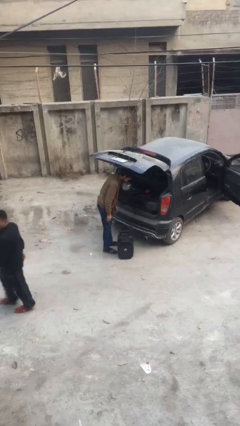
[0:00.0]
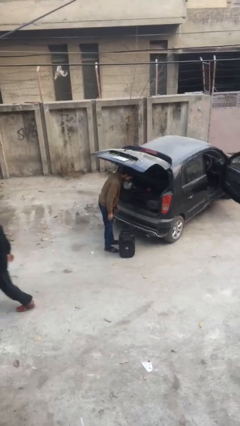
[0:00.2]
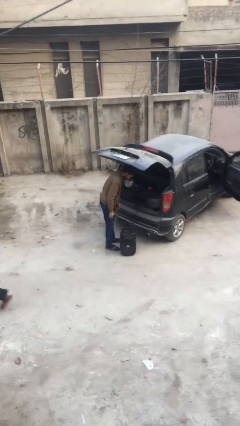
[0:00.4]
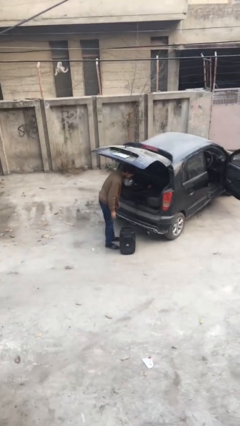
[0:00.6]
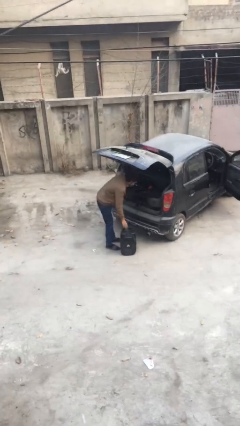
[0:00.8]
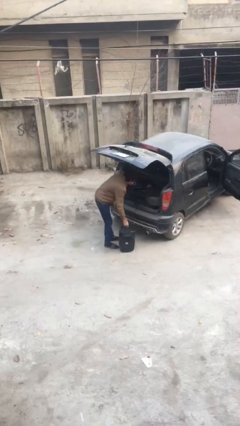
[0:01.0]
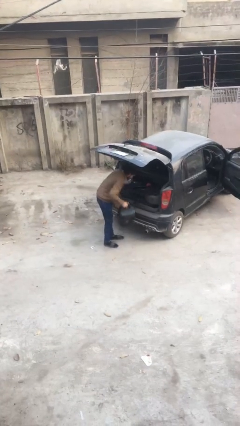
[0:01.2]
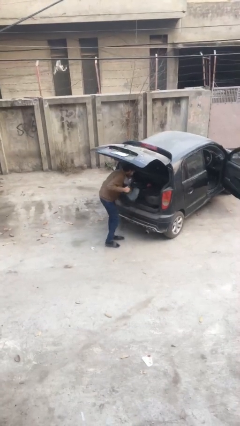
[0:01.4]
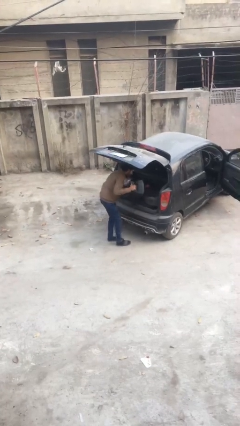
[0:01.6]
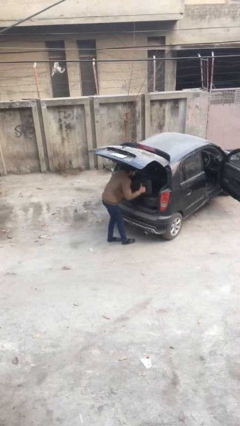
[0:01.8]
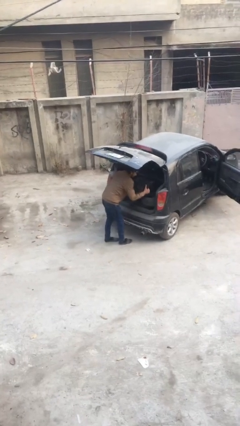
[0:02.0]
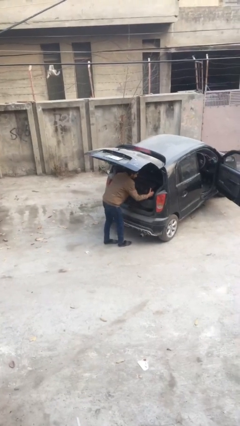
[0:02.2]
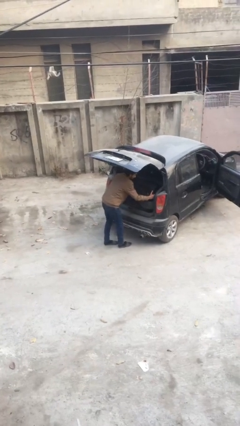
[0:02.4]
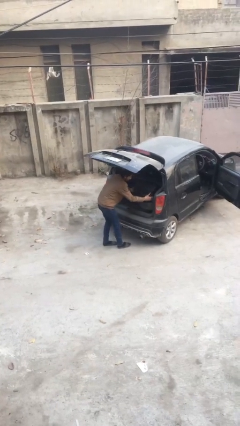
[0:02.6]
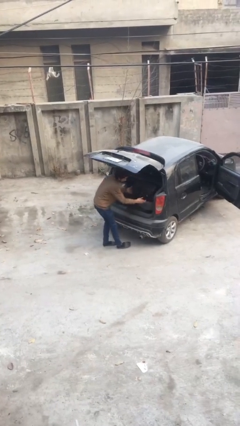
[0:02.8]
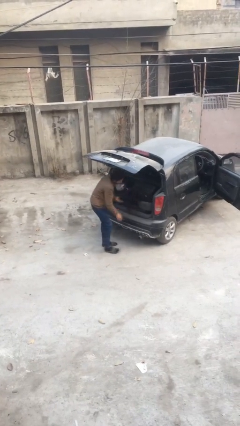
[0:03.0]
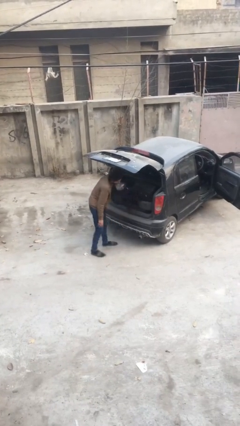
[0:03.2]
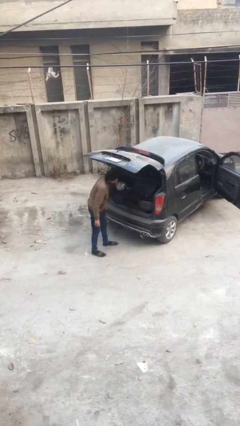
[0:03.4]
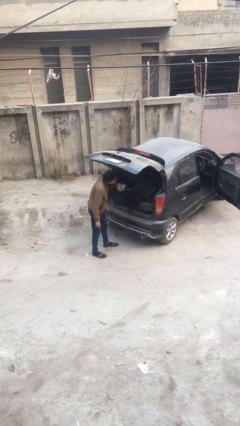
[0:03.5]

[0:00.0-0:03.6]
person loads car

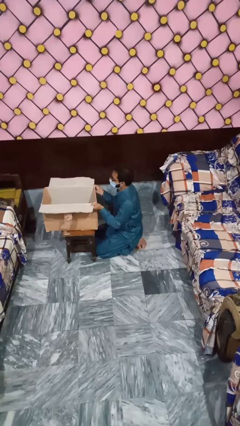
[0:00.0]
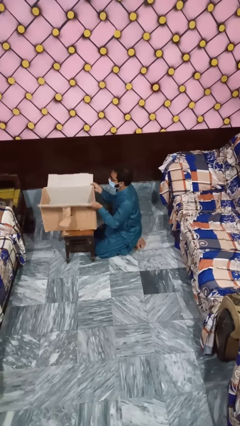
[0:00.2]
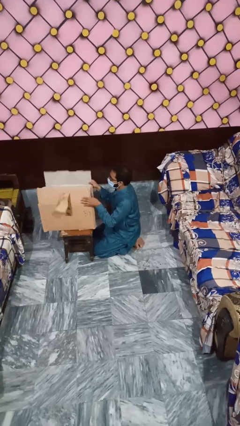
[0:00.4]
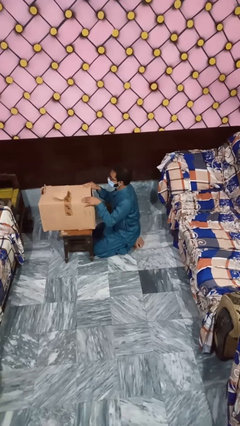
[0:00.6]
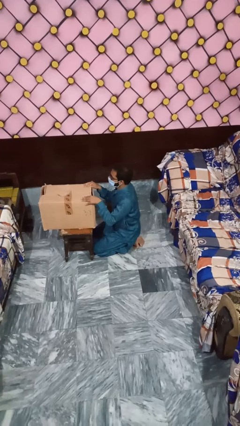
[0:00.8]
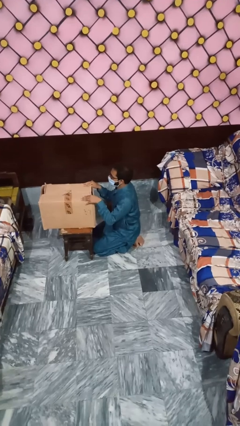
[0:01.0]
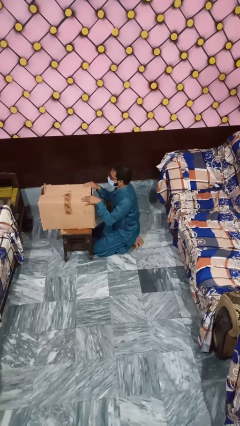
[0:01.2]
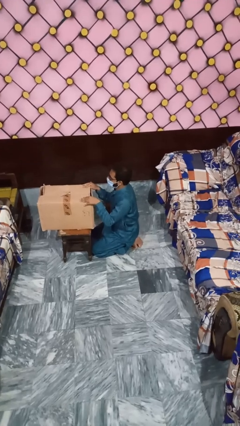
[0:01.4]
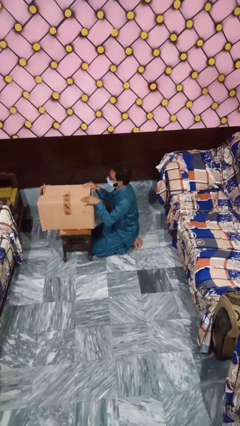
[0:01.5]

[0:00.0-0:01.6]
person closes box

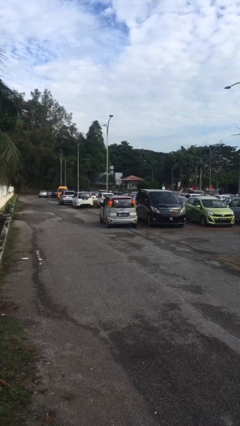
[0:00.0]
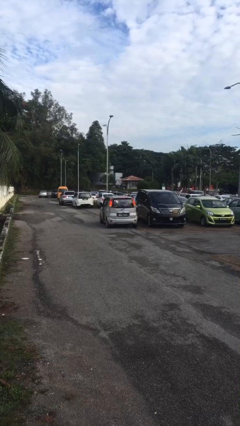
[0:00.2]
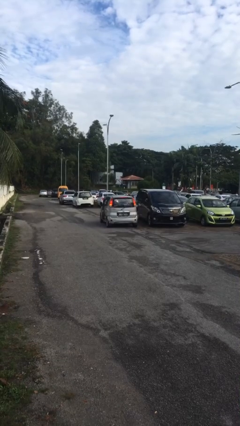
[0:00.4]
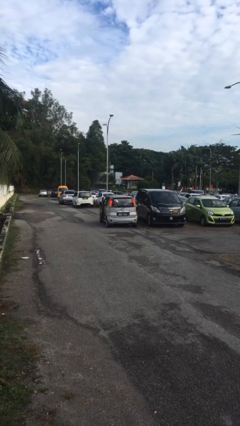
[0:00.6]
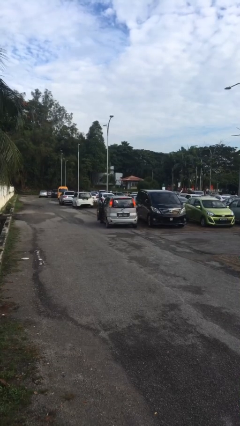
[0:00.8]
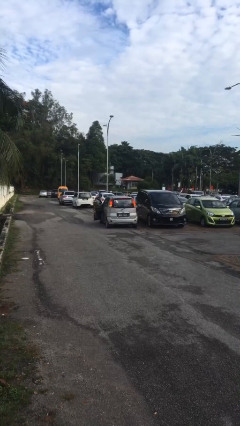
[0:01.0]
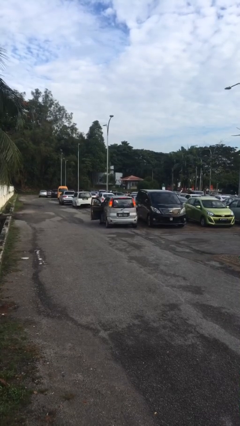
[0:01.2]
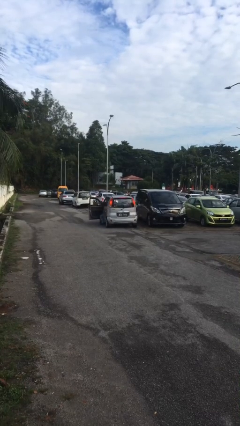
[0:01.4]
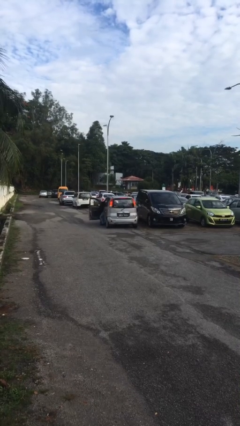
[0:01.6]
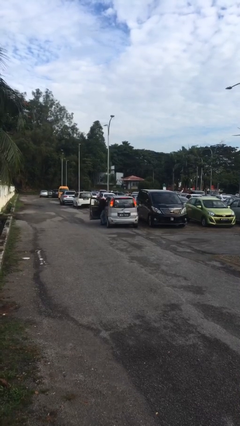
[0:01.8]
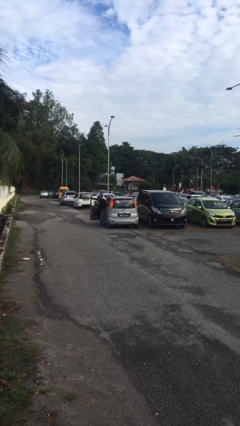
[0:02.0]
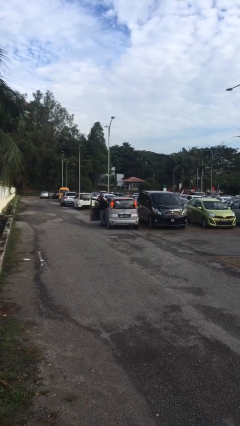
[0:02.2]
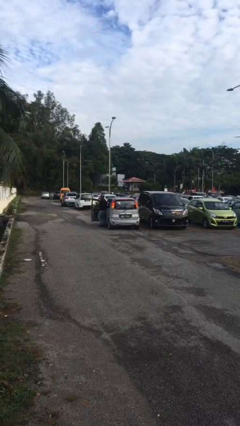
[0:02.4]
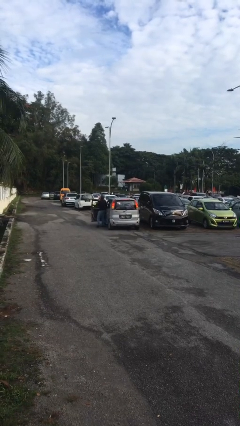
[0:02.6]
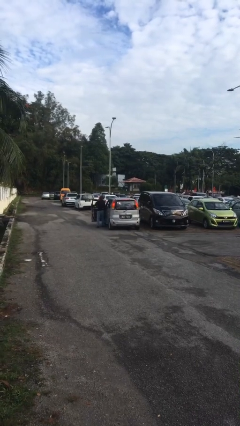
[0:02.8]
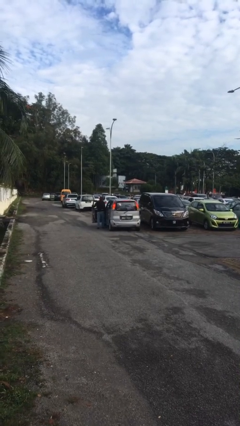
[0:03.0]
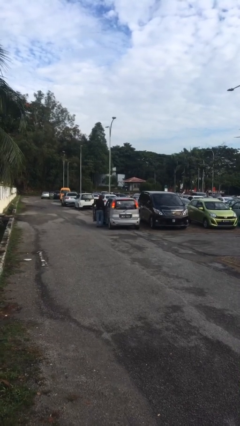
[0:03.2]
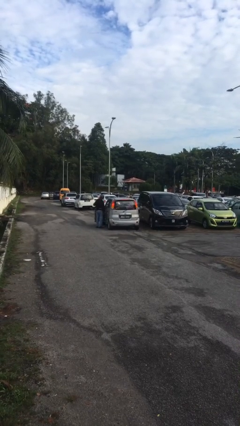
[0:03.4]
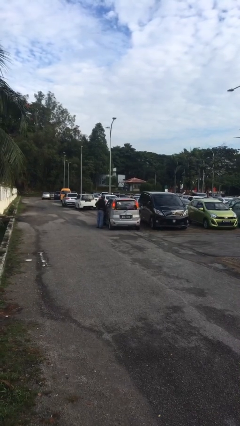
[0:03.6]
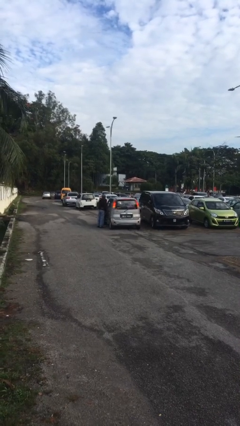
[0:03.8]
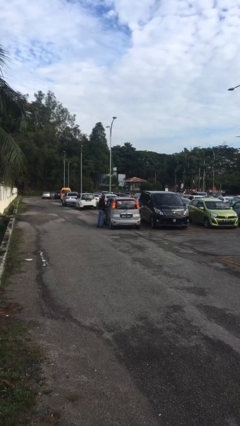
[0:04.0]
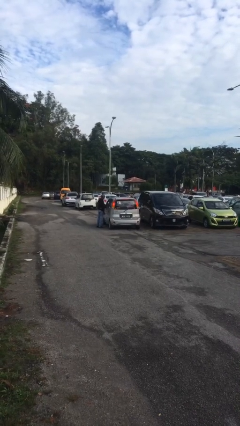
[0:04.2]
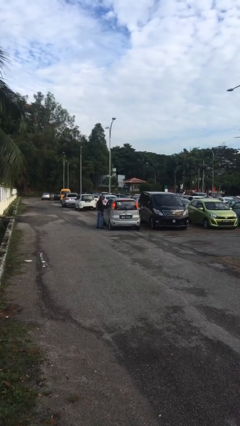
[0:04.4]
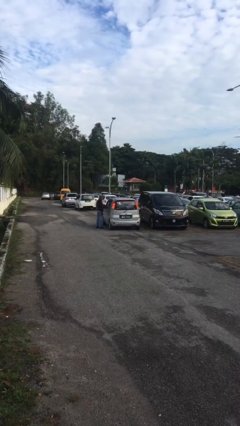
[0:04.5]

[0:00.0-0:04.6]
car drops off person

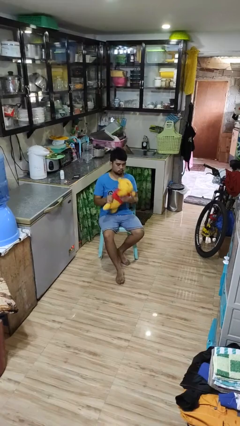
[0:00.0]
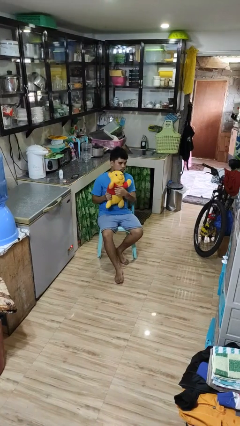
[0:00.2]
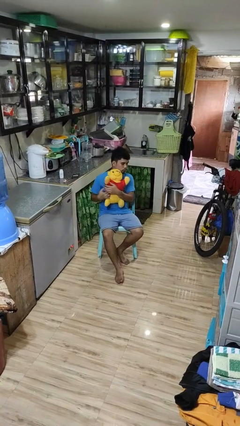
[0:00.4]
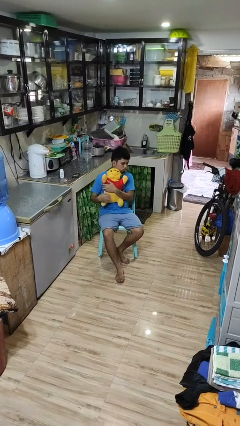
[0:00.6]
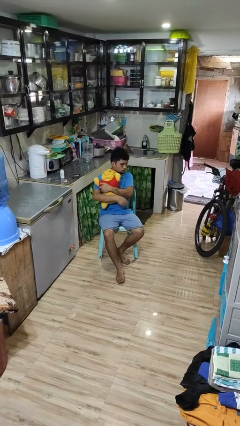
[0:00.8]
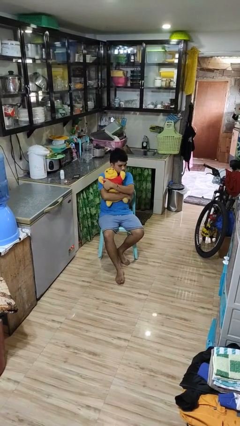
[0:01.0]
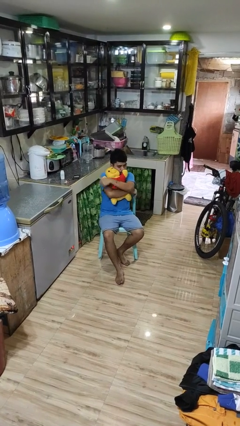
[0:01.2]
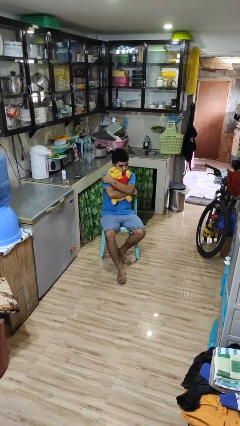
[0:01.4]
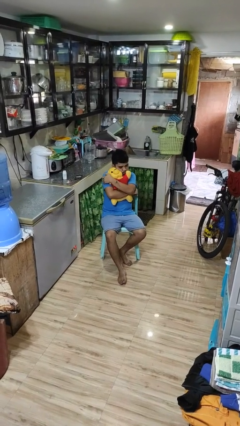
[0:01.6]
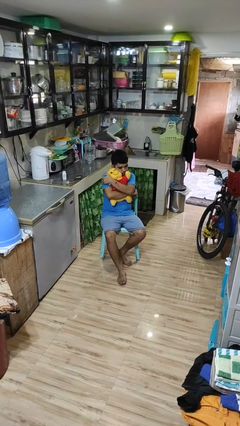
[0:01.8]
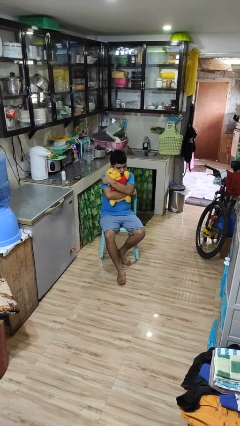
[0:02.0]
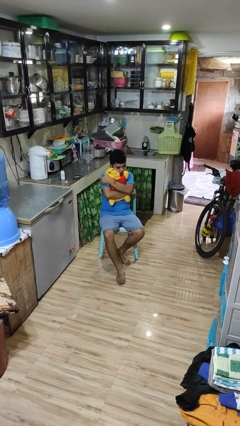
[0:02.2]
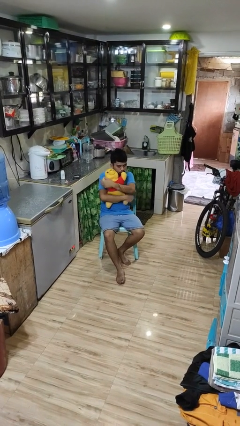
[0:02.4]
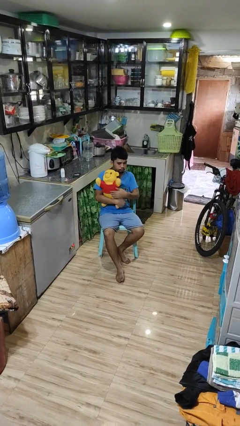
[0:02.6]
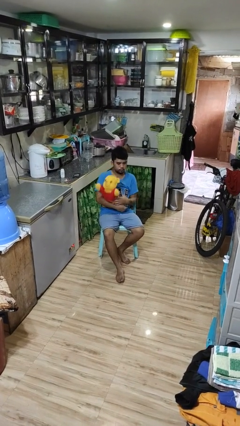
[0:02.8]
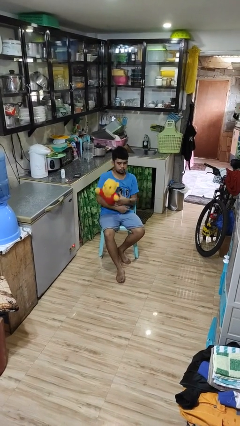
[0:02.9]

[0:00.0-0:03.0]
person hugs stuffed animal

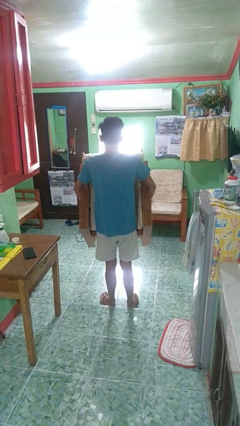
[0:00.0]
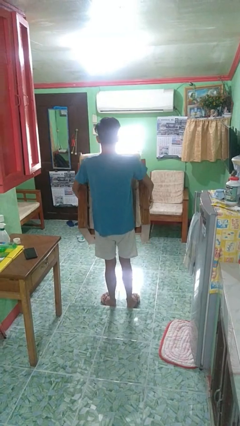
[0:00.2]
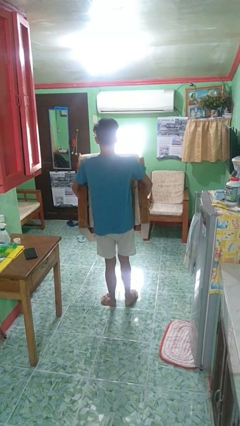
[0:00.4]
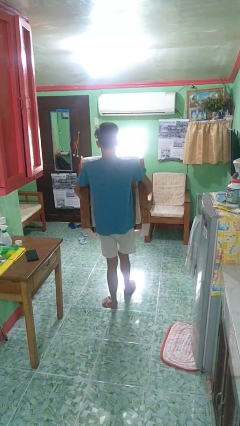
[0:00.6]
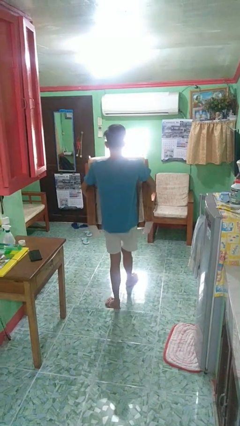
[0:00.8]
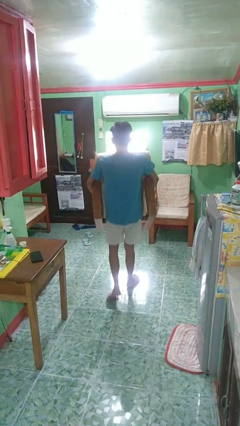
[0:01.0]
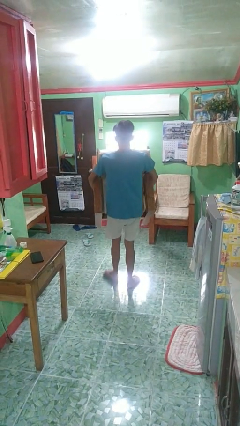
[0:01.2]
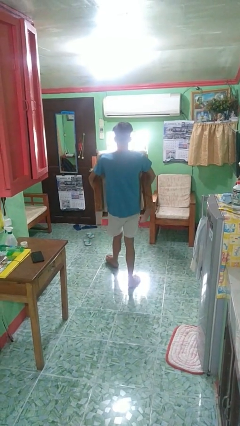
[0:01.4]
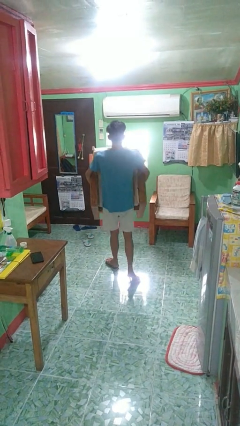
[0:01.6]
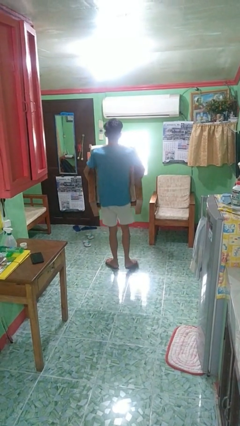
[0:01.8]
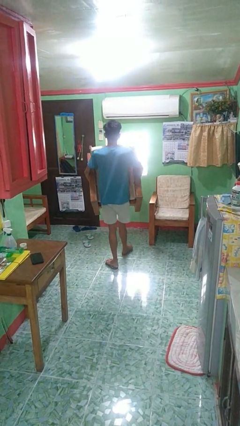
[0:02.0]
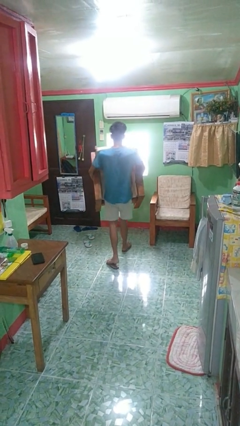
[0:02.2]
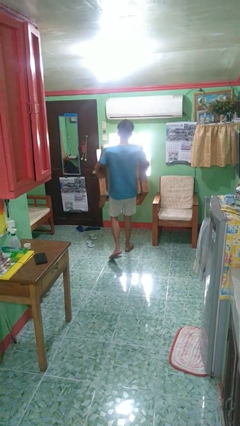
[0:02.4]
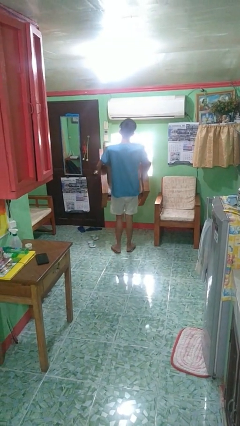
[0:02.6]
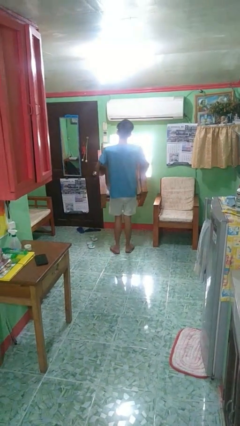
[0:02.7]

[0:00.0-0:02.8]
person carries furniture

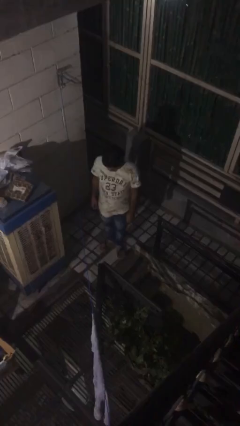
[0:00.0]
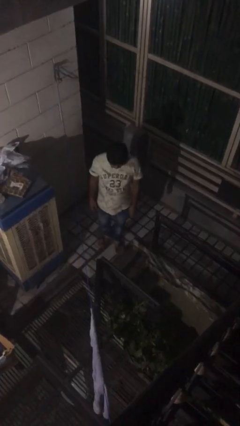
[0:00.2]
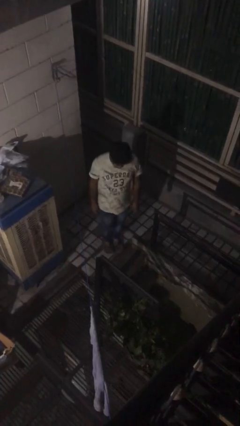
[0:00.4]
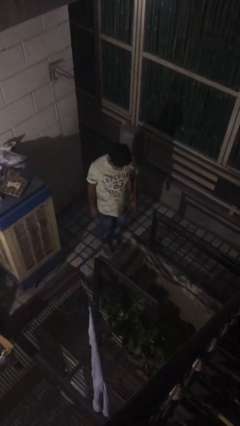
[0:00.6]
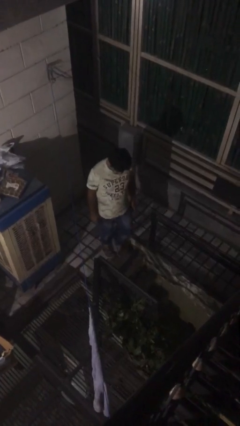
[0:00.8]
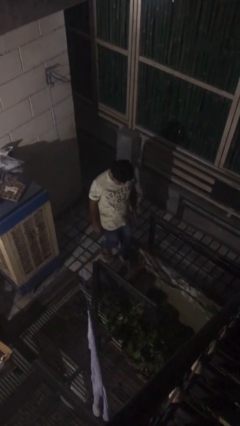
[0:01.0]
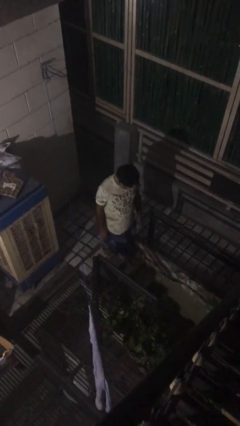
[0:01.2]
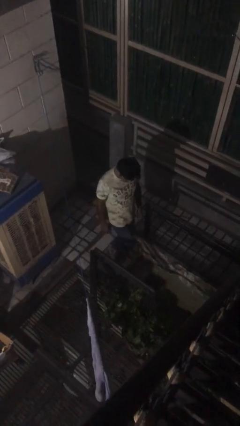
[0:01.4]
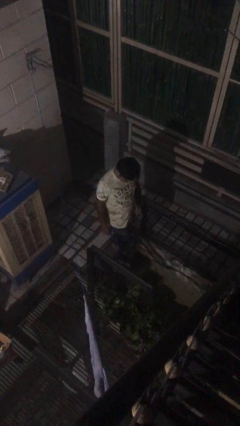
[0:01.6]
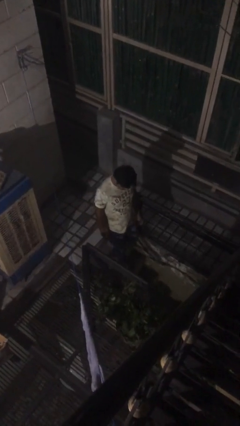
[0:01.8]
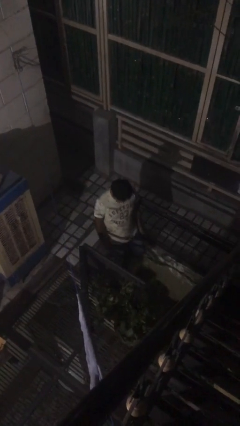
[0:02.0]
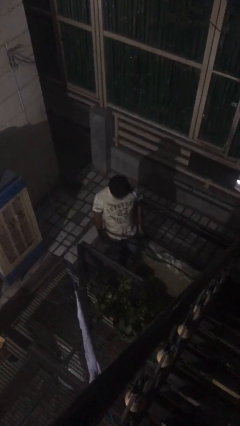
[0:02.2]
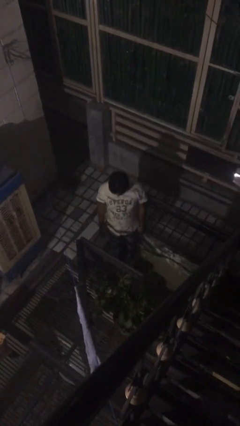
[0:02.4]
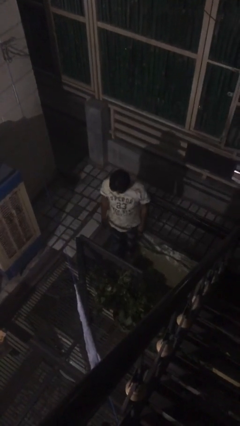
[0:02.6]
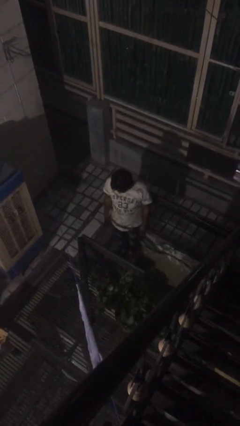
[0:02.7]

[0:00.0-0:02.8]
person climbs down stairs
